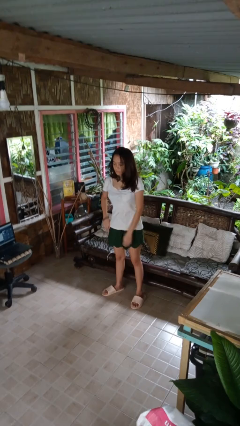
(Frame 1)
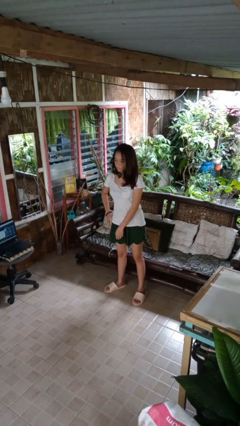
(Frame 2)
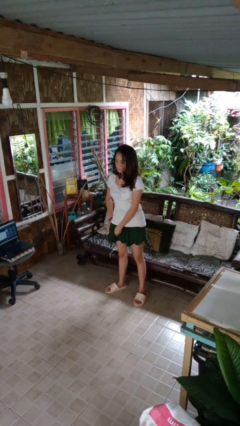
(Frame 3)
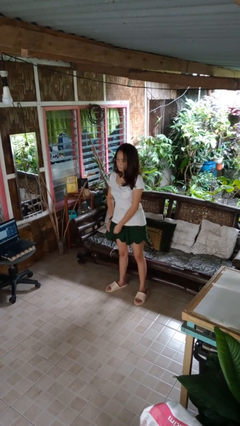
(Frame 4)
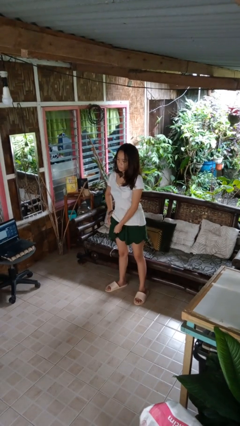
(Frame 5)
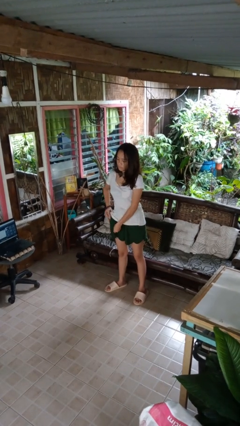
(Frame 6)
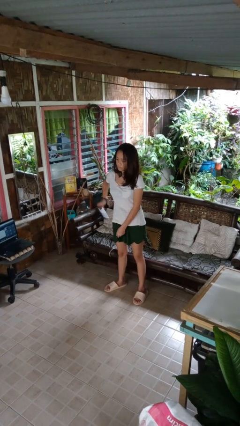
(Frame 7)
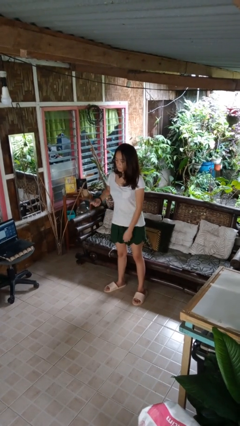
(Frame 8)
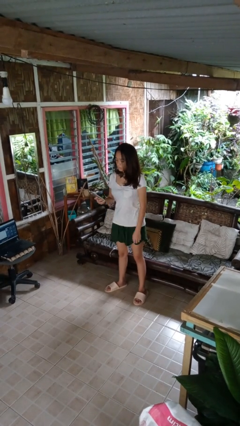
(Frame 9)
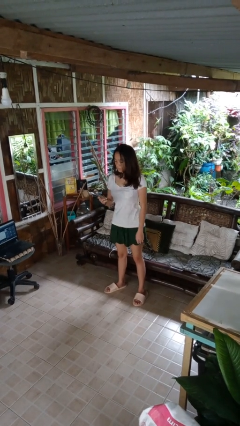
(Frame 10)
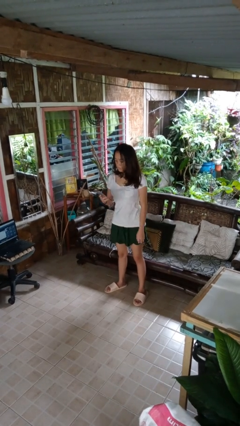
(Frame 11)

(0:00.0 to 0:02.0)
person takes phone from pocket

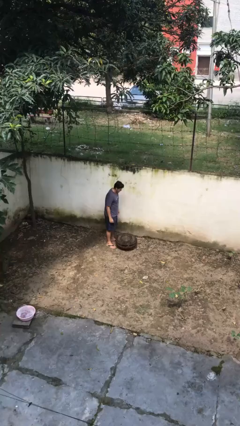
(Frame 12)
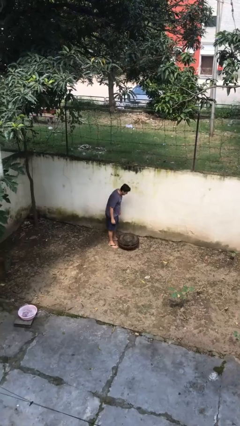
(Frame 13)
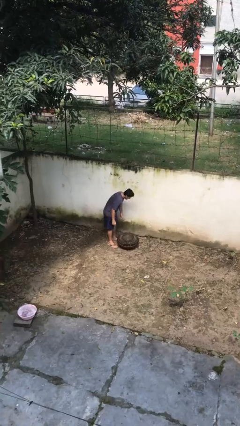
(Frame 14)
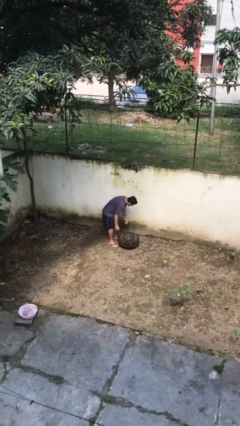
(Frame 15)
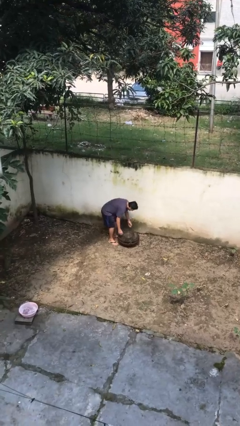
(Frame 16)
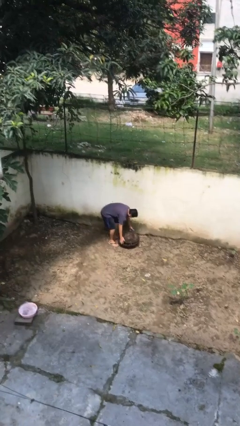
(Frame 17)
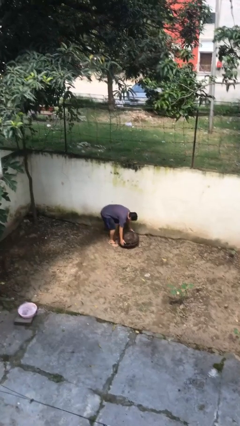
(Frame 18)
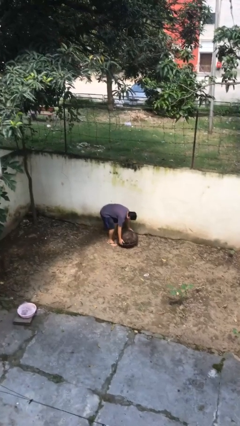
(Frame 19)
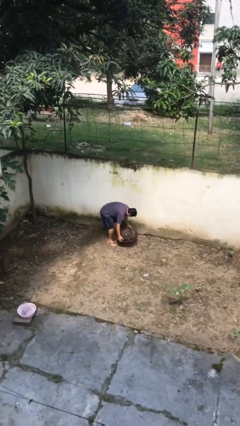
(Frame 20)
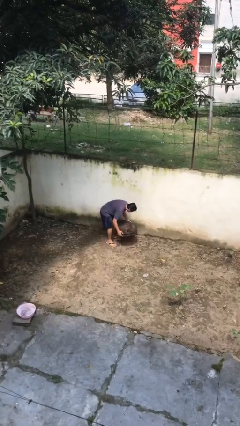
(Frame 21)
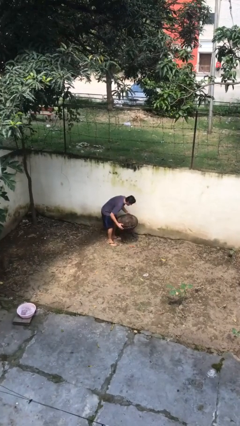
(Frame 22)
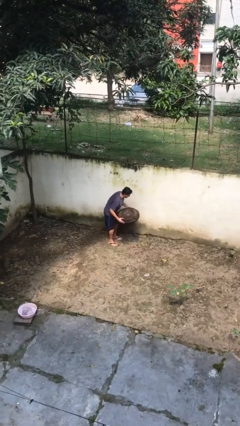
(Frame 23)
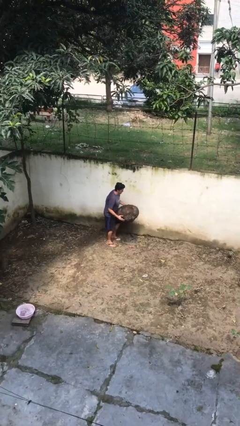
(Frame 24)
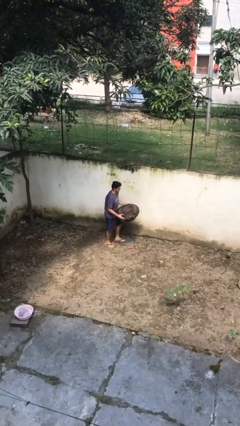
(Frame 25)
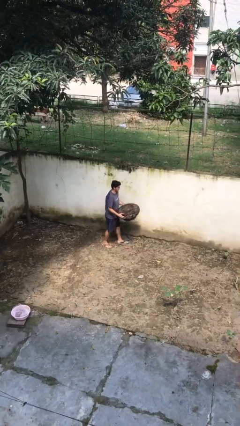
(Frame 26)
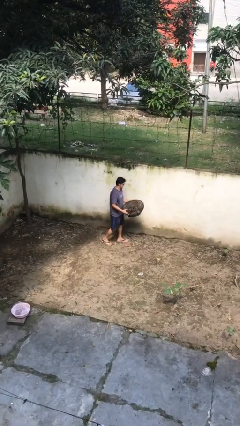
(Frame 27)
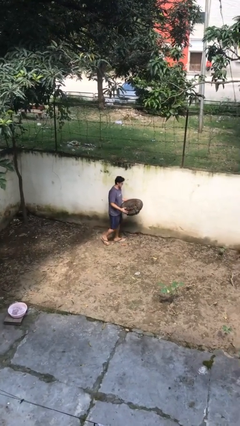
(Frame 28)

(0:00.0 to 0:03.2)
person picks up object from floor

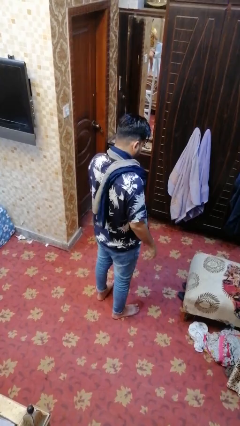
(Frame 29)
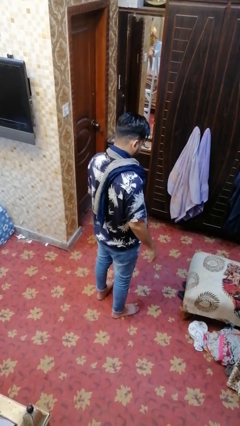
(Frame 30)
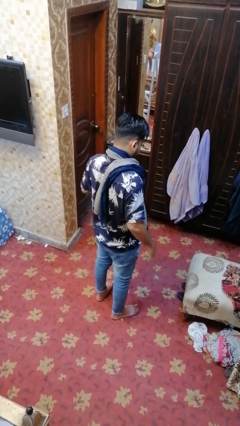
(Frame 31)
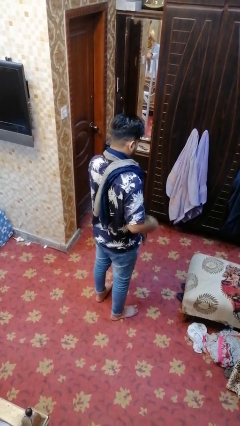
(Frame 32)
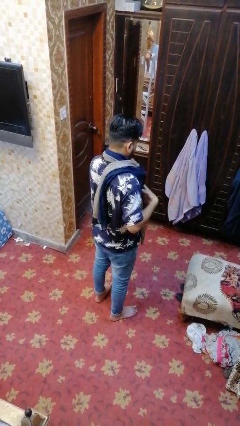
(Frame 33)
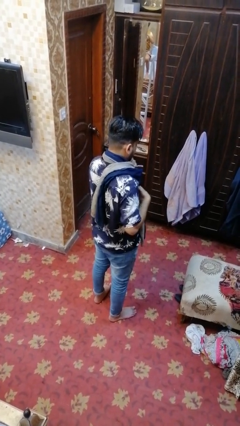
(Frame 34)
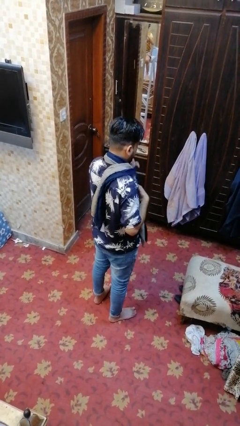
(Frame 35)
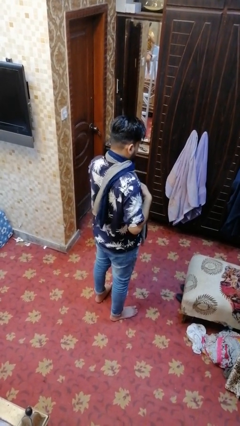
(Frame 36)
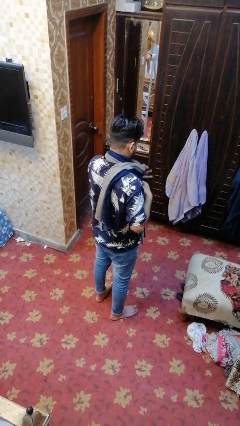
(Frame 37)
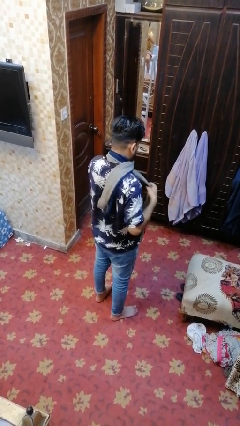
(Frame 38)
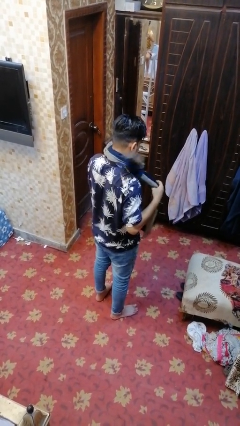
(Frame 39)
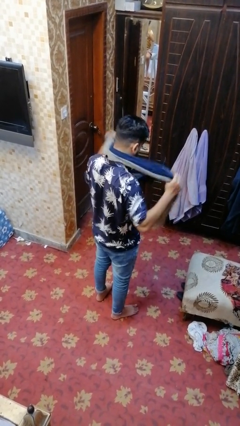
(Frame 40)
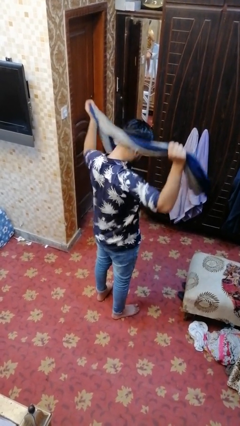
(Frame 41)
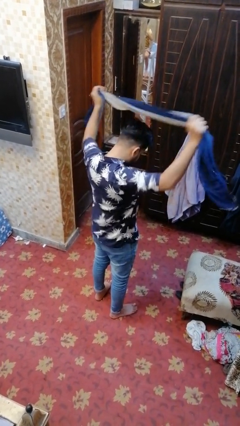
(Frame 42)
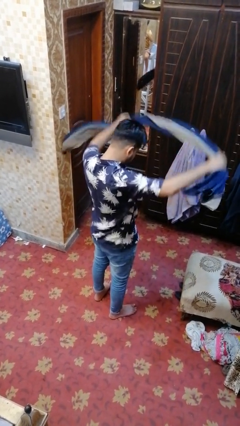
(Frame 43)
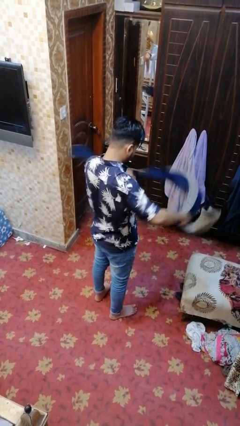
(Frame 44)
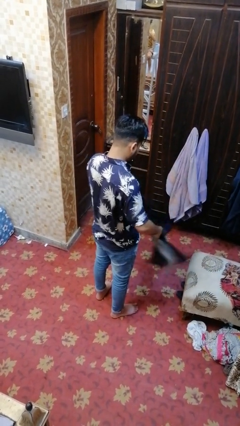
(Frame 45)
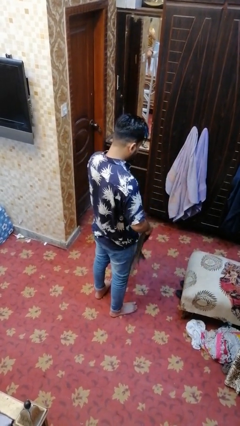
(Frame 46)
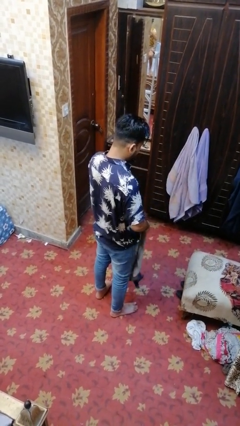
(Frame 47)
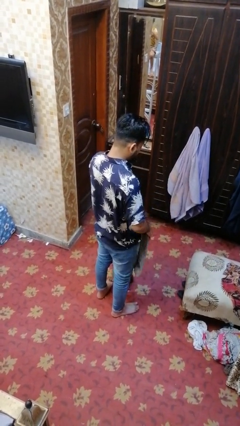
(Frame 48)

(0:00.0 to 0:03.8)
person takes off scarf

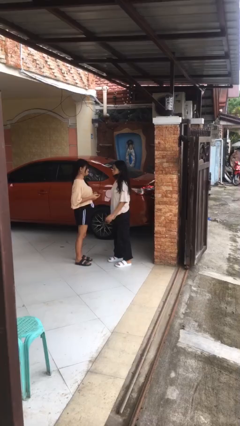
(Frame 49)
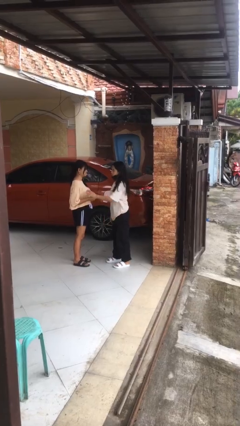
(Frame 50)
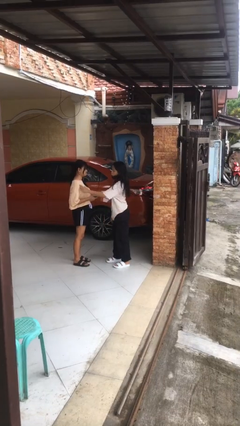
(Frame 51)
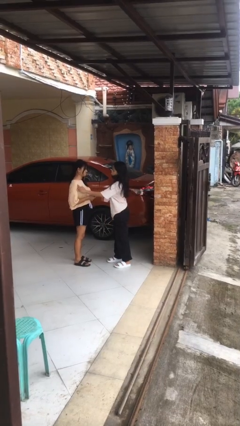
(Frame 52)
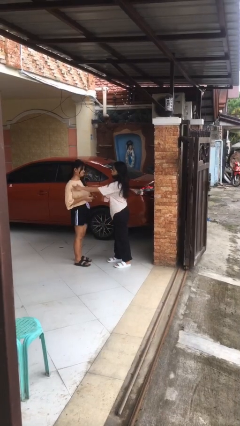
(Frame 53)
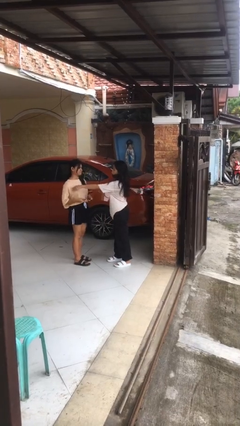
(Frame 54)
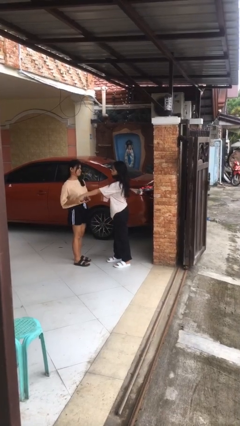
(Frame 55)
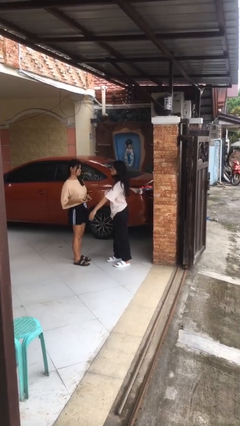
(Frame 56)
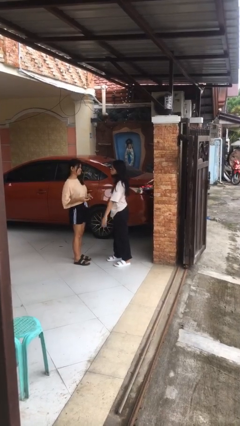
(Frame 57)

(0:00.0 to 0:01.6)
person shoves person

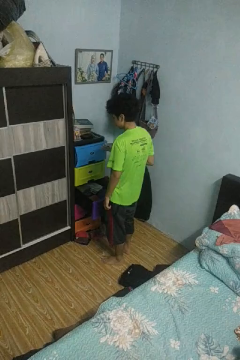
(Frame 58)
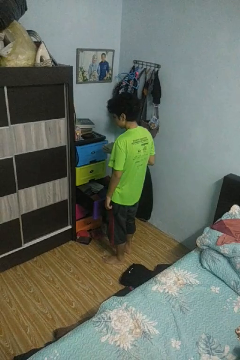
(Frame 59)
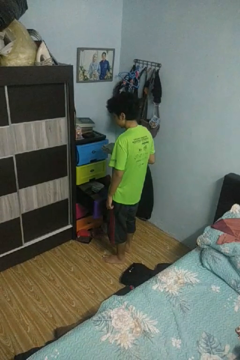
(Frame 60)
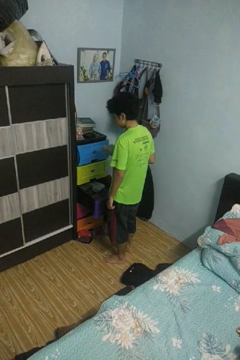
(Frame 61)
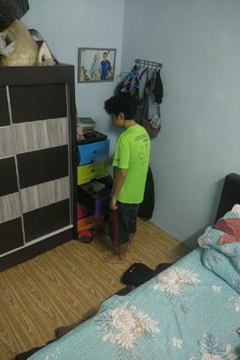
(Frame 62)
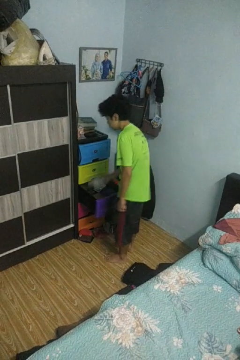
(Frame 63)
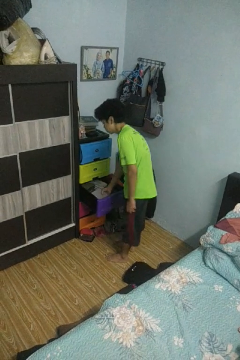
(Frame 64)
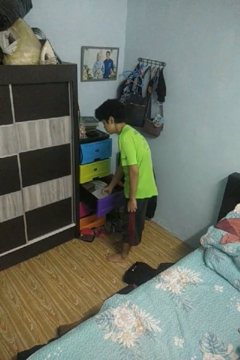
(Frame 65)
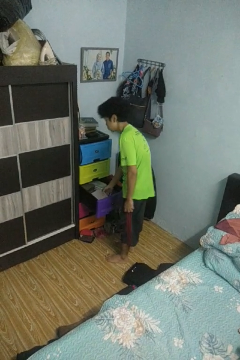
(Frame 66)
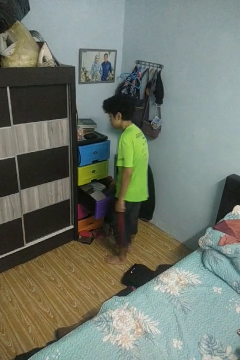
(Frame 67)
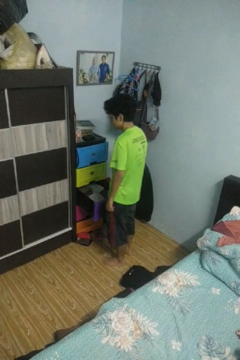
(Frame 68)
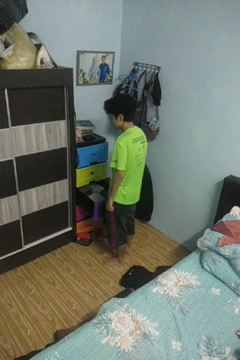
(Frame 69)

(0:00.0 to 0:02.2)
person puts clothes into dresser

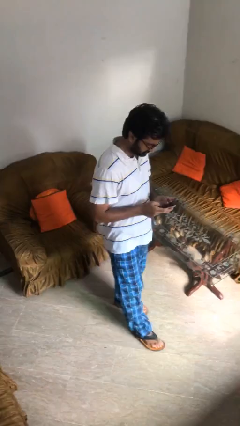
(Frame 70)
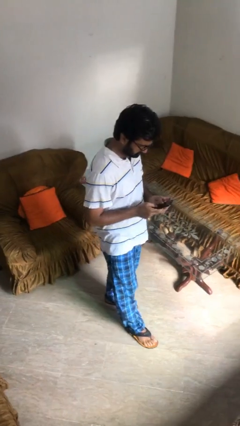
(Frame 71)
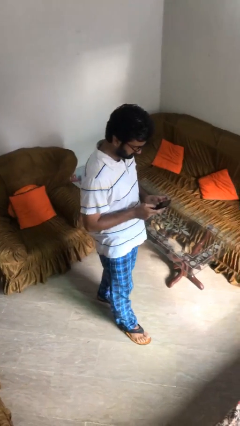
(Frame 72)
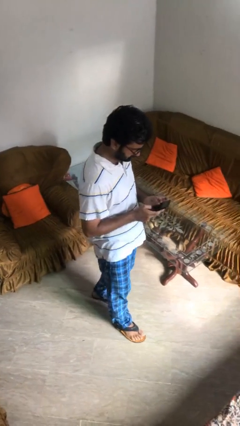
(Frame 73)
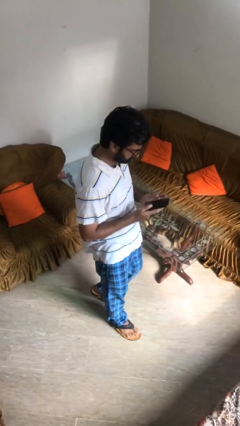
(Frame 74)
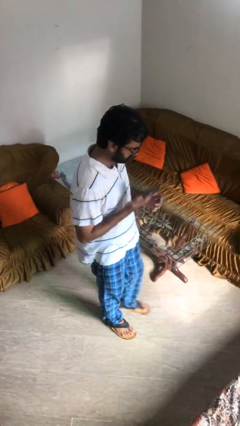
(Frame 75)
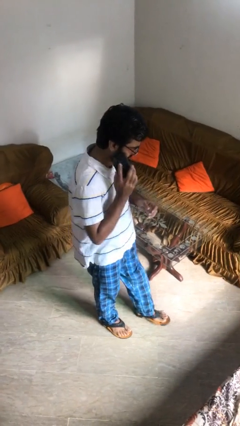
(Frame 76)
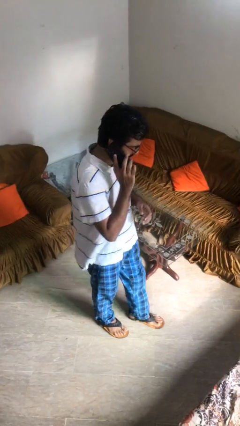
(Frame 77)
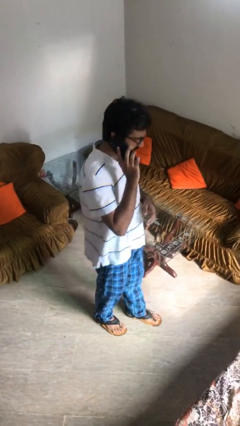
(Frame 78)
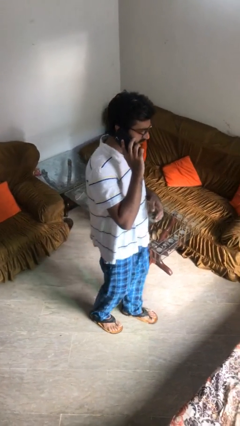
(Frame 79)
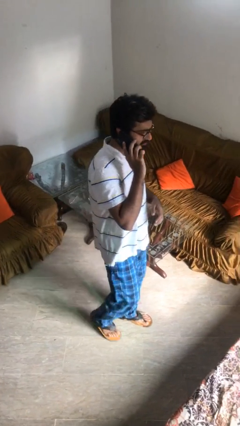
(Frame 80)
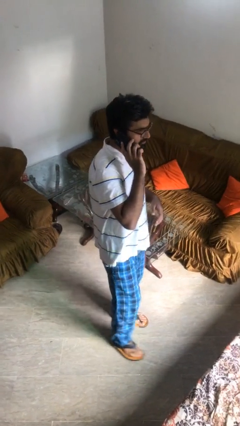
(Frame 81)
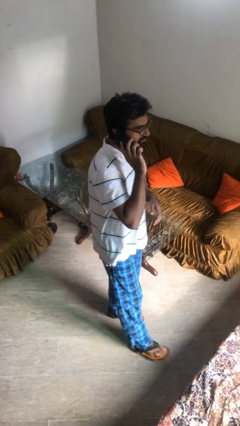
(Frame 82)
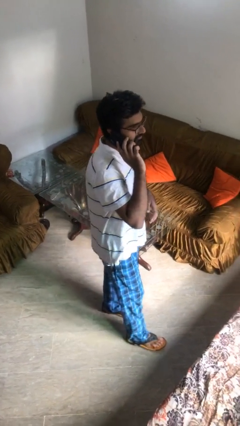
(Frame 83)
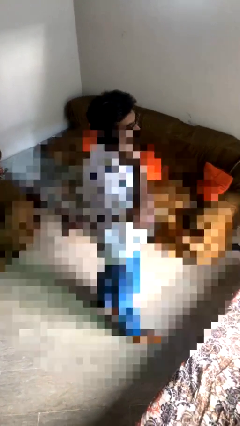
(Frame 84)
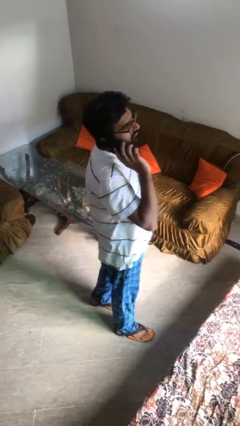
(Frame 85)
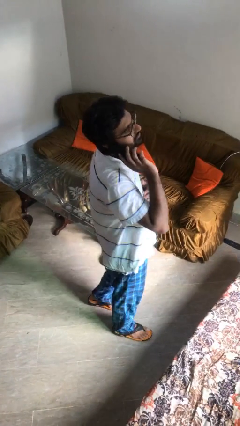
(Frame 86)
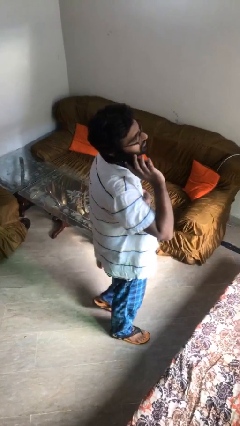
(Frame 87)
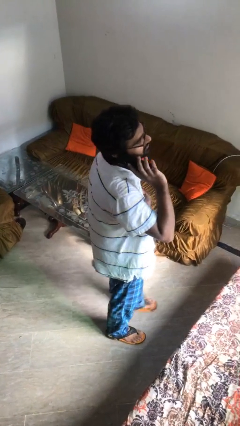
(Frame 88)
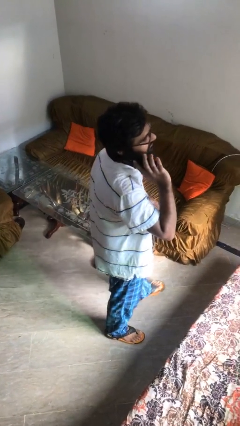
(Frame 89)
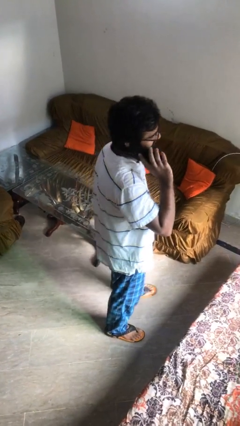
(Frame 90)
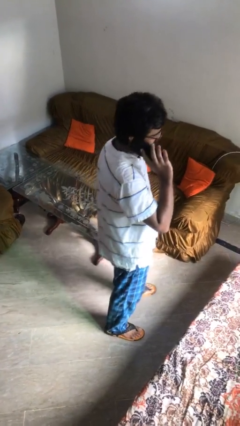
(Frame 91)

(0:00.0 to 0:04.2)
person talks on phone

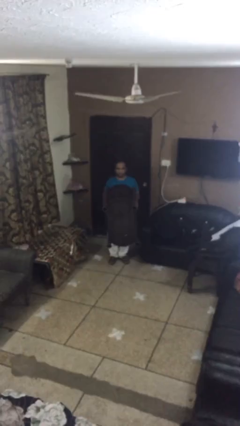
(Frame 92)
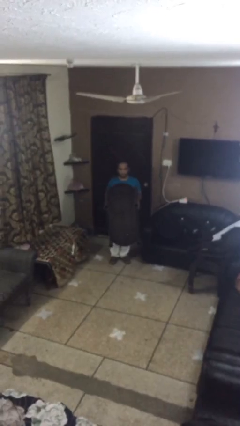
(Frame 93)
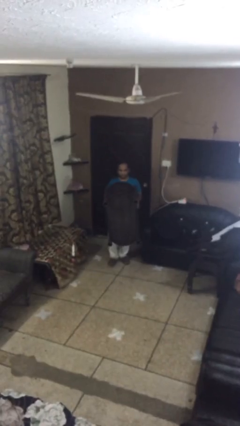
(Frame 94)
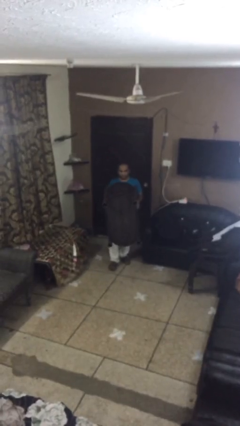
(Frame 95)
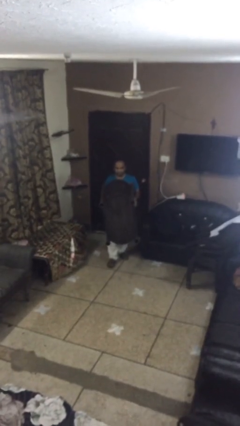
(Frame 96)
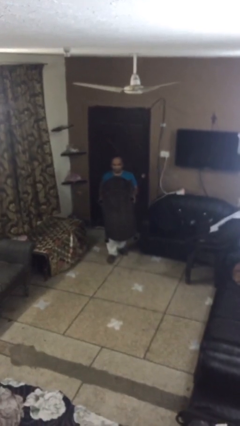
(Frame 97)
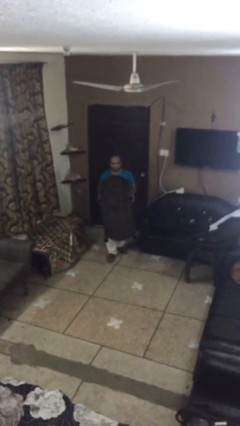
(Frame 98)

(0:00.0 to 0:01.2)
person carries heavy object
